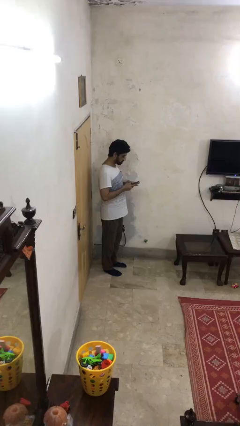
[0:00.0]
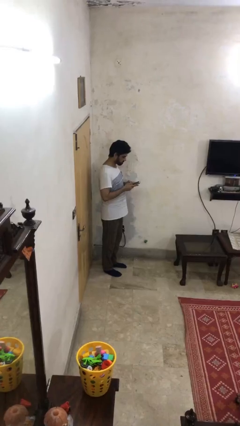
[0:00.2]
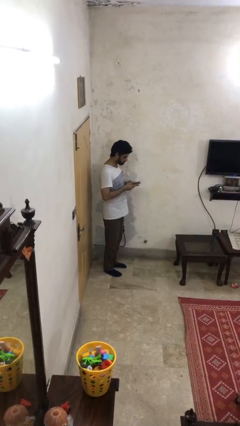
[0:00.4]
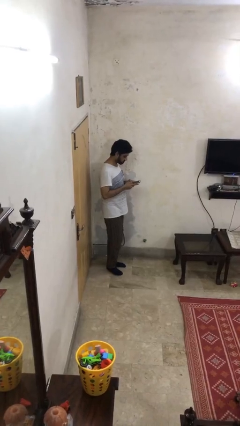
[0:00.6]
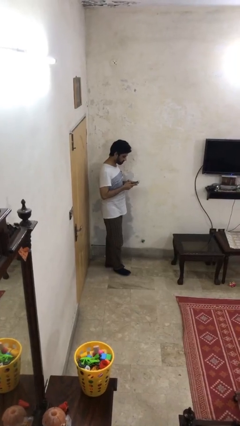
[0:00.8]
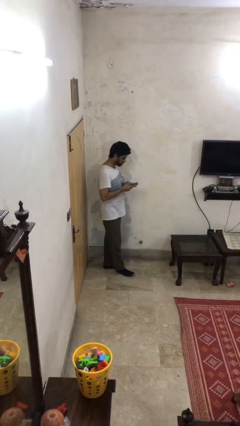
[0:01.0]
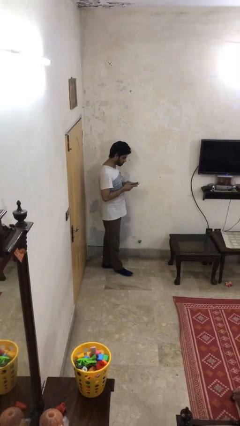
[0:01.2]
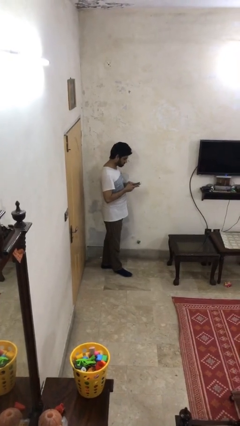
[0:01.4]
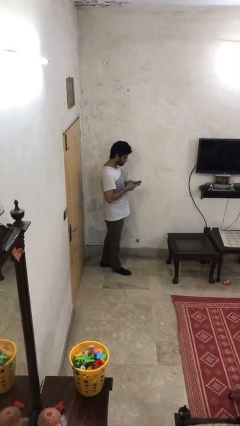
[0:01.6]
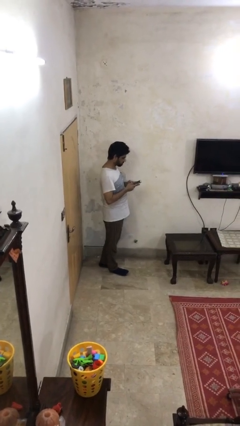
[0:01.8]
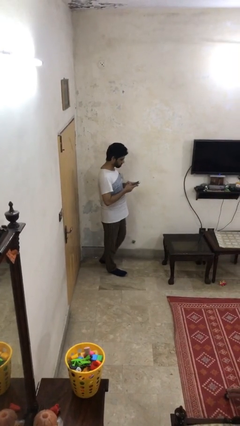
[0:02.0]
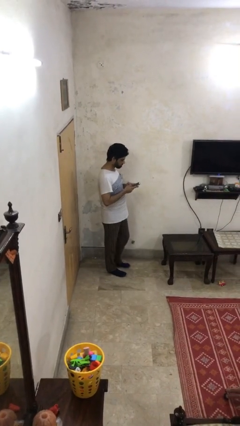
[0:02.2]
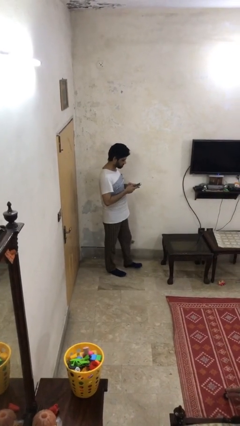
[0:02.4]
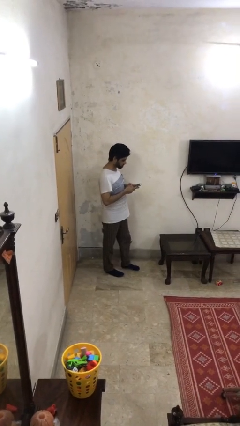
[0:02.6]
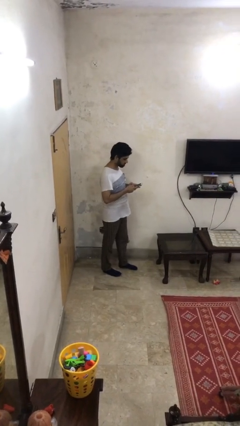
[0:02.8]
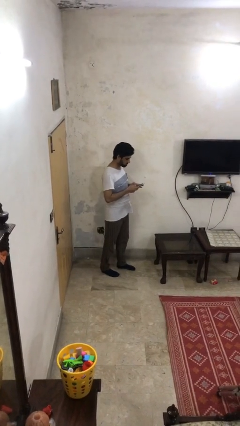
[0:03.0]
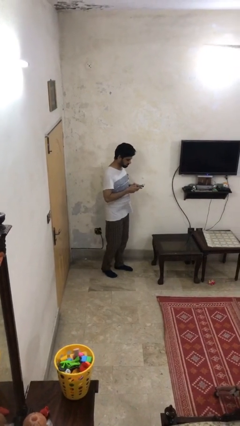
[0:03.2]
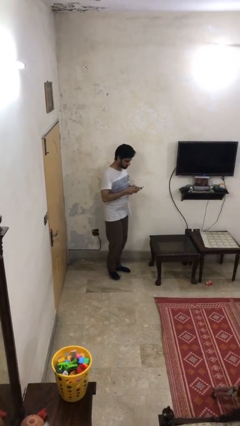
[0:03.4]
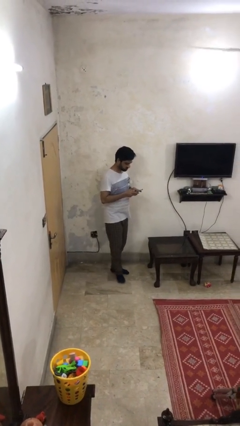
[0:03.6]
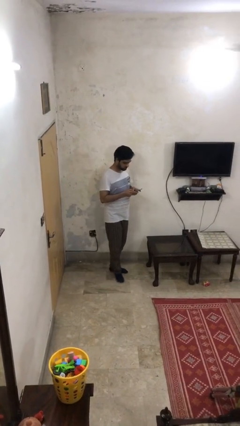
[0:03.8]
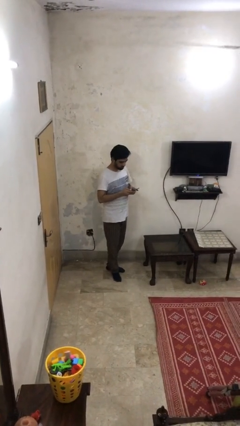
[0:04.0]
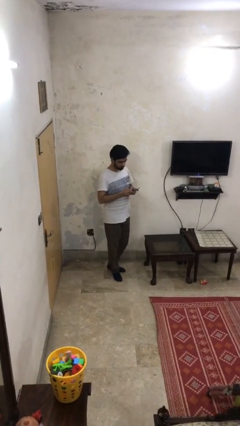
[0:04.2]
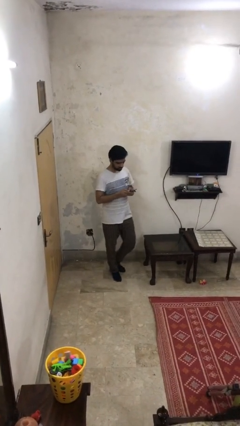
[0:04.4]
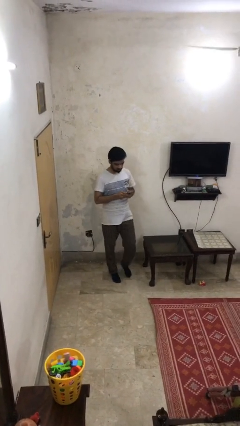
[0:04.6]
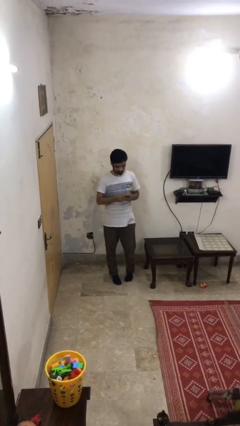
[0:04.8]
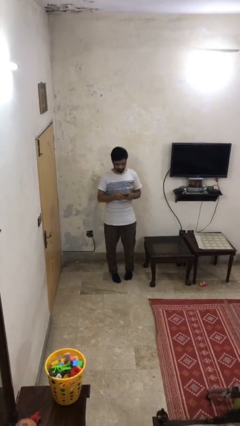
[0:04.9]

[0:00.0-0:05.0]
person texts on phone

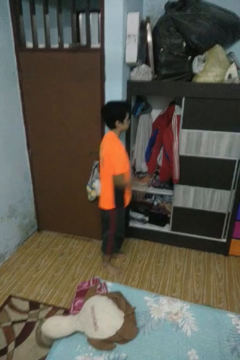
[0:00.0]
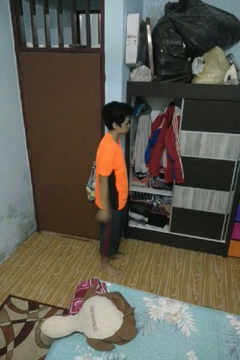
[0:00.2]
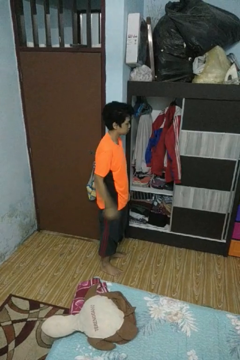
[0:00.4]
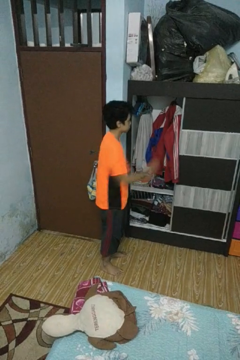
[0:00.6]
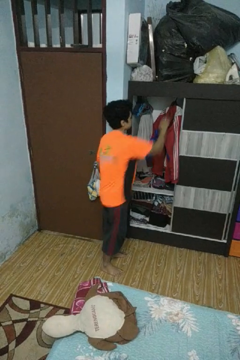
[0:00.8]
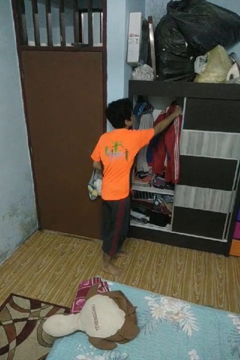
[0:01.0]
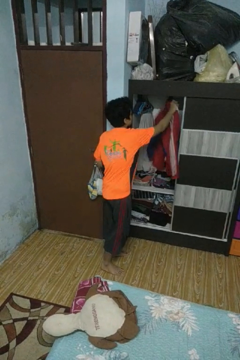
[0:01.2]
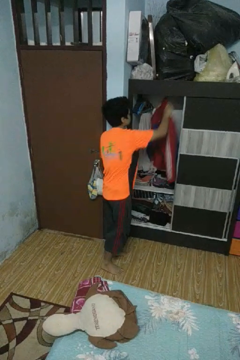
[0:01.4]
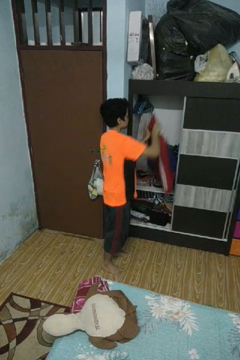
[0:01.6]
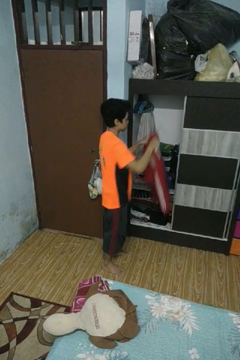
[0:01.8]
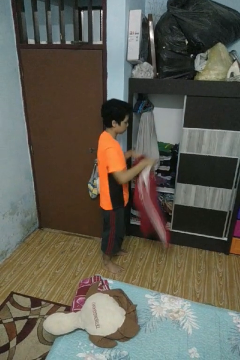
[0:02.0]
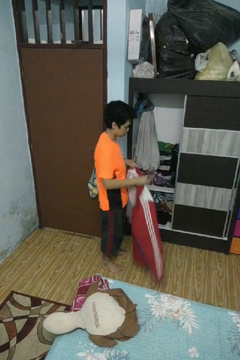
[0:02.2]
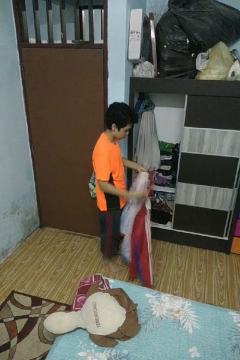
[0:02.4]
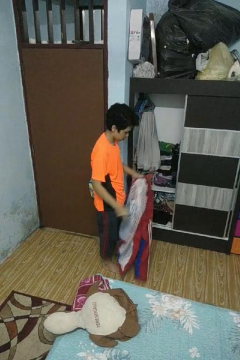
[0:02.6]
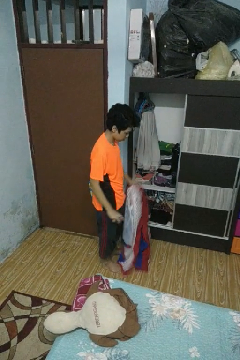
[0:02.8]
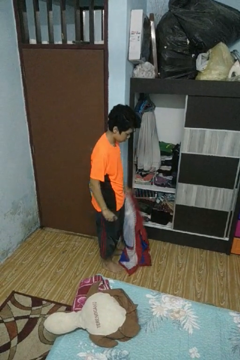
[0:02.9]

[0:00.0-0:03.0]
person takes clothes from closet

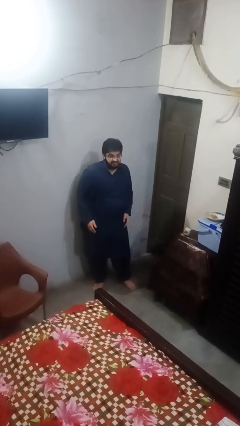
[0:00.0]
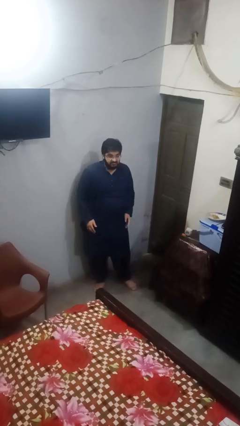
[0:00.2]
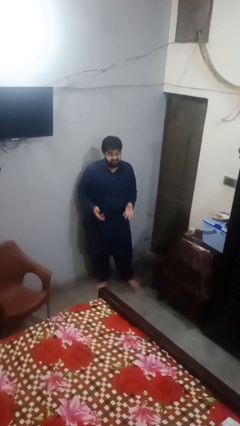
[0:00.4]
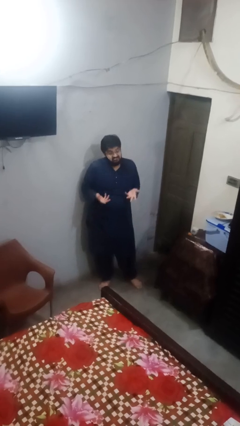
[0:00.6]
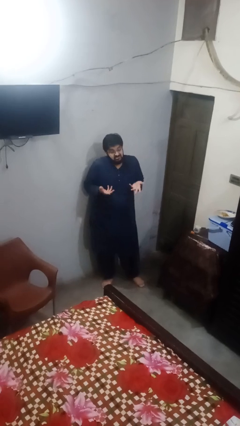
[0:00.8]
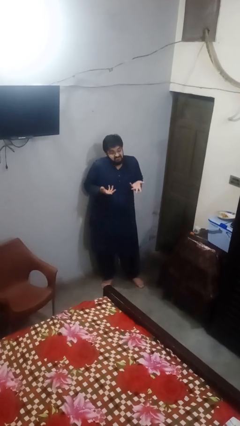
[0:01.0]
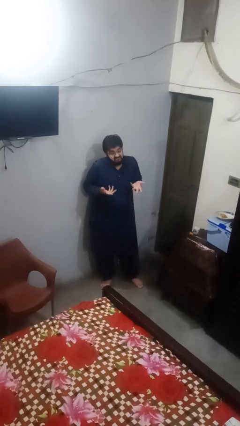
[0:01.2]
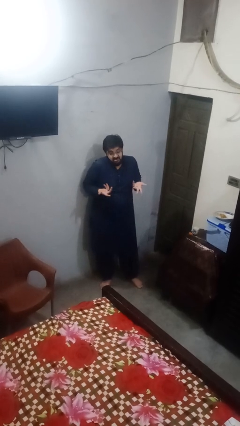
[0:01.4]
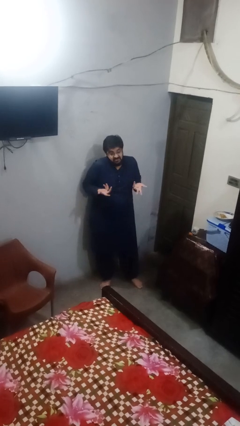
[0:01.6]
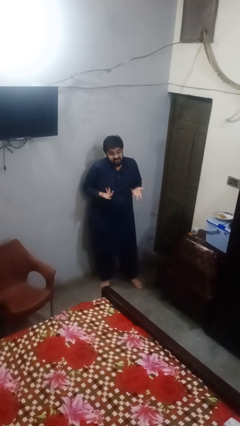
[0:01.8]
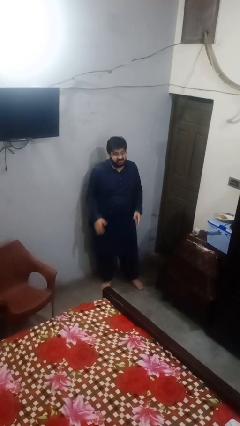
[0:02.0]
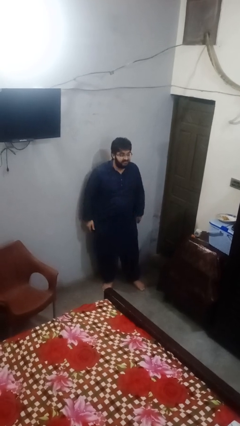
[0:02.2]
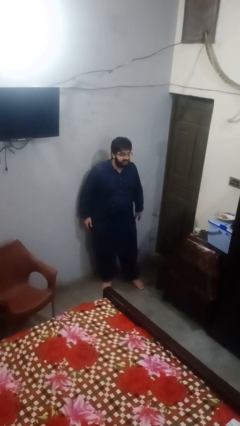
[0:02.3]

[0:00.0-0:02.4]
person shrugs

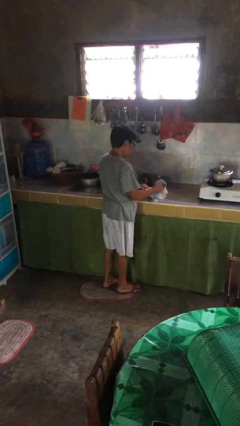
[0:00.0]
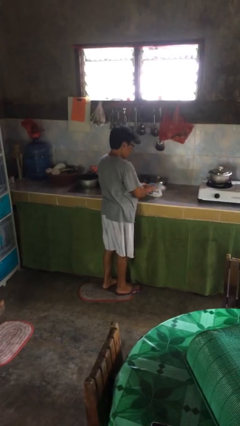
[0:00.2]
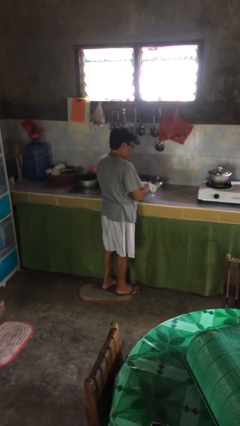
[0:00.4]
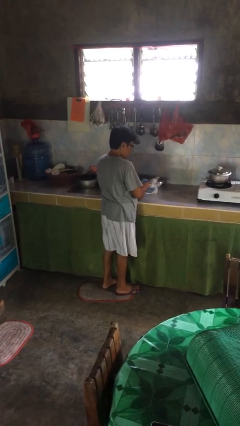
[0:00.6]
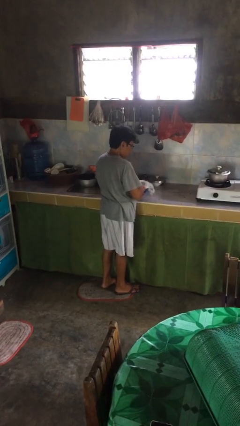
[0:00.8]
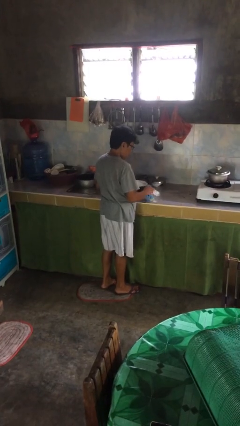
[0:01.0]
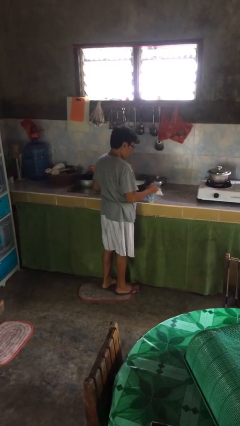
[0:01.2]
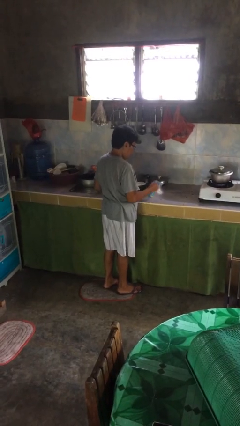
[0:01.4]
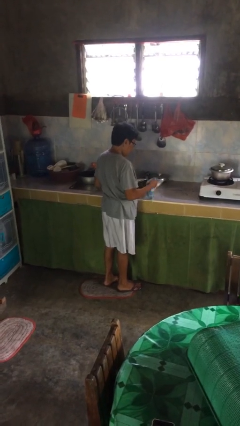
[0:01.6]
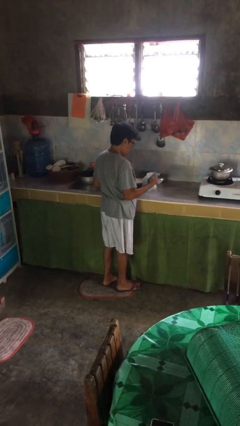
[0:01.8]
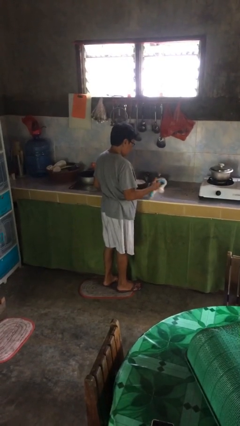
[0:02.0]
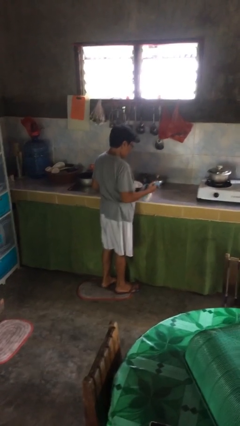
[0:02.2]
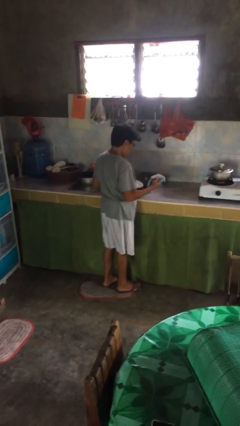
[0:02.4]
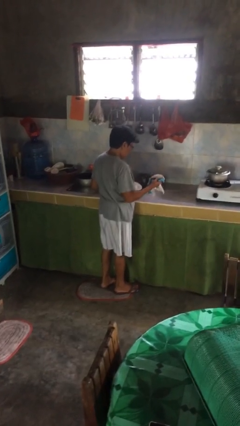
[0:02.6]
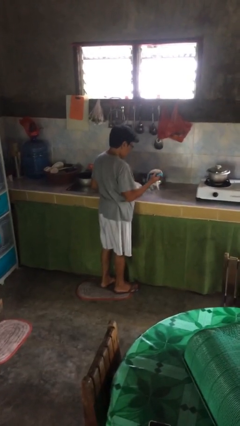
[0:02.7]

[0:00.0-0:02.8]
person dries dish

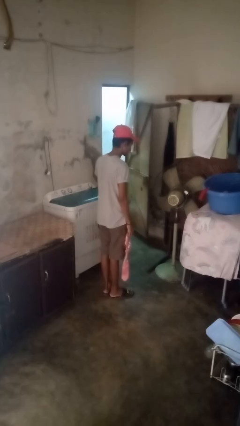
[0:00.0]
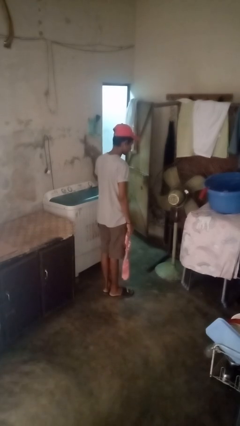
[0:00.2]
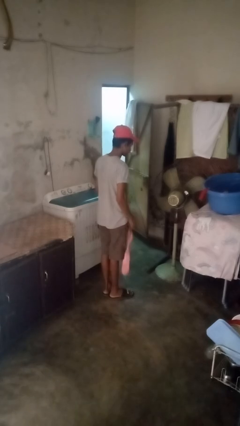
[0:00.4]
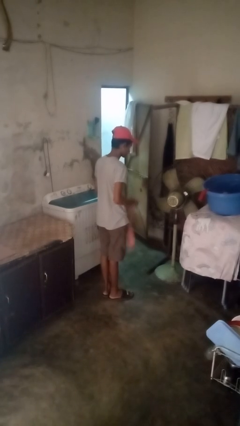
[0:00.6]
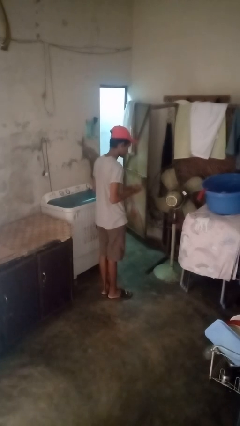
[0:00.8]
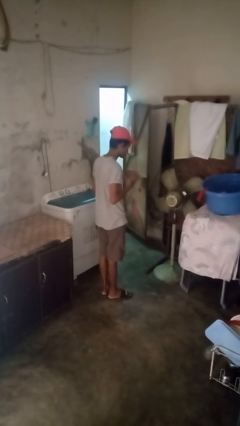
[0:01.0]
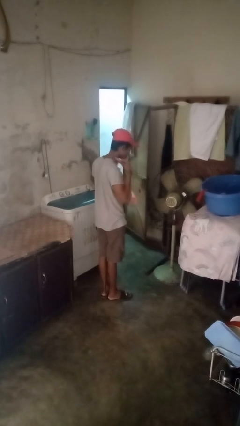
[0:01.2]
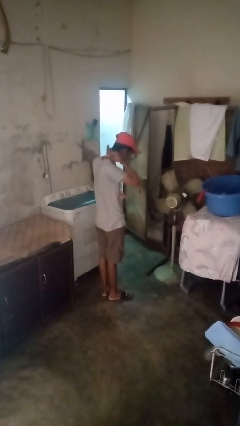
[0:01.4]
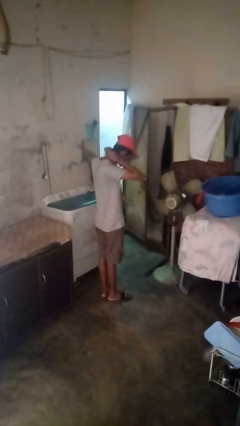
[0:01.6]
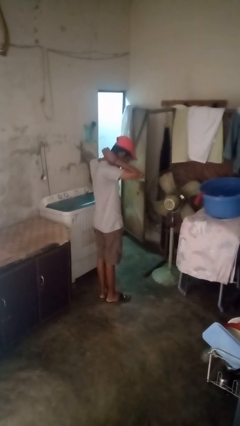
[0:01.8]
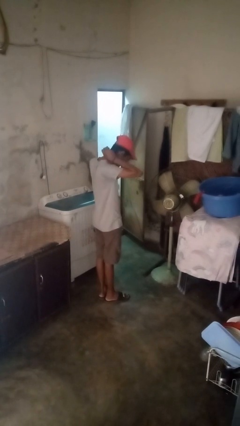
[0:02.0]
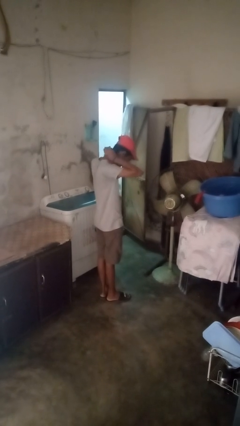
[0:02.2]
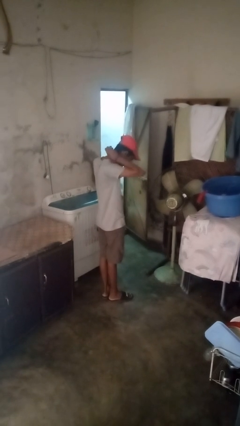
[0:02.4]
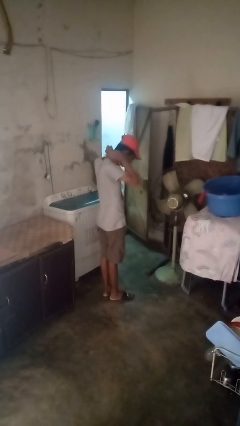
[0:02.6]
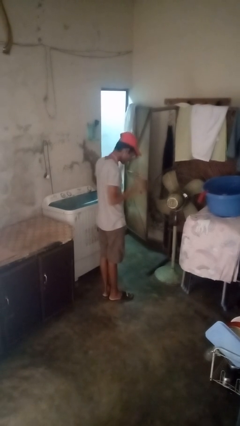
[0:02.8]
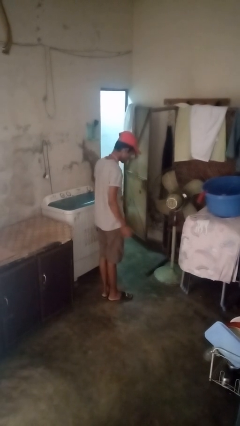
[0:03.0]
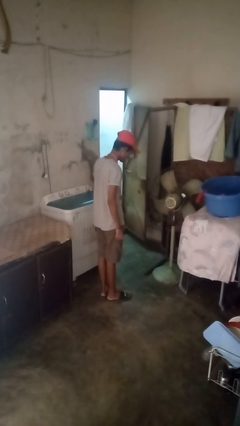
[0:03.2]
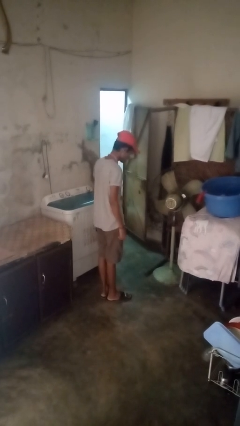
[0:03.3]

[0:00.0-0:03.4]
person puts on necktie

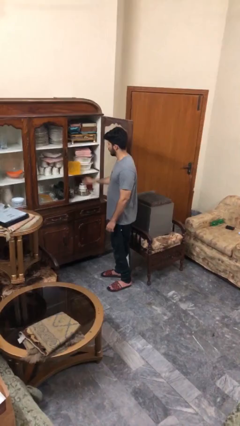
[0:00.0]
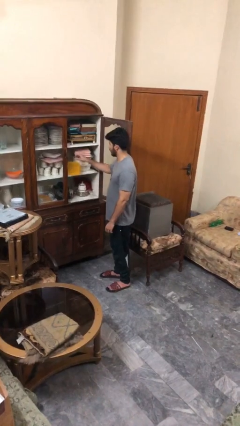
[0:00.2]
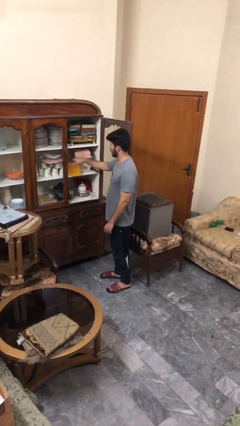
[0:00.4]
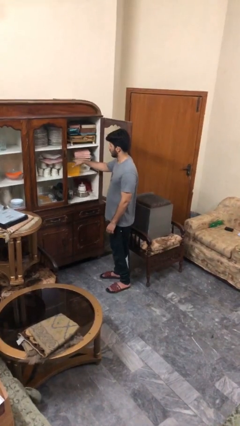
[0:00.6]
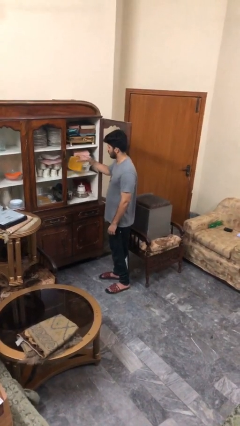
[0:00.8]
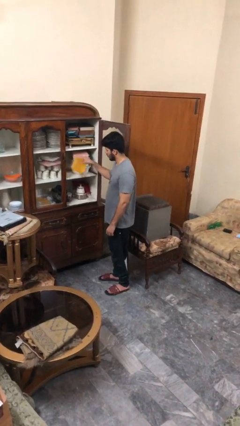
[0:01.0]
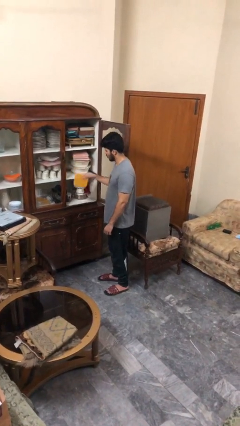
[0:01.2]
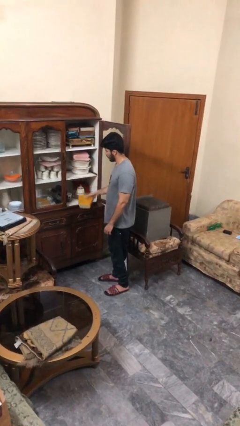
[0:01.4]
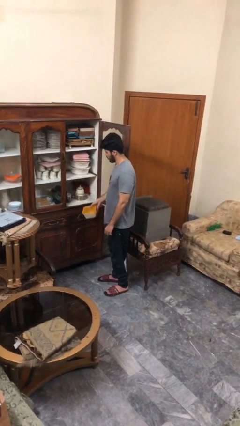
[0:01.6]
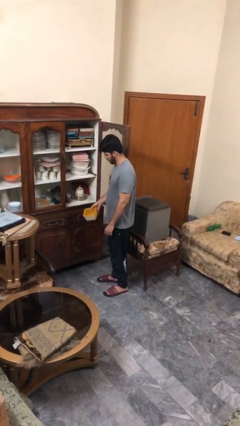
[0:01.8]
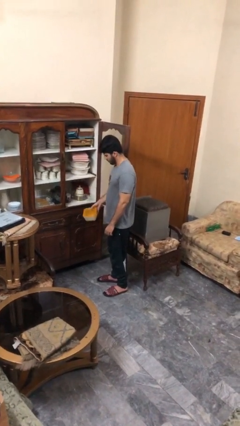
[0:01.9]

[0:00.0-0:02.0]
person picks up object from cabinet
